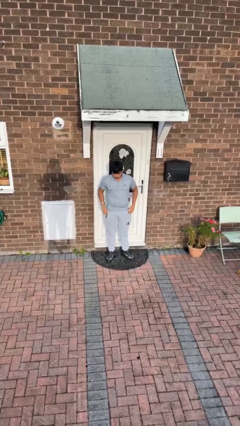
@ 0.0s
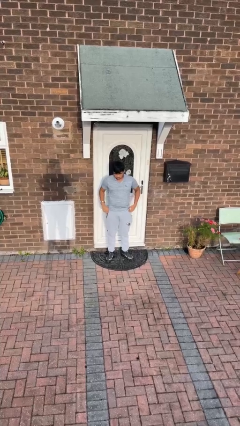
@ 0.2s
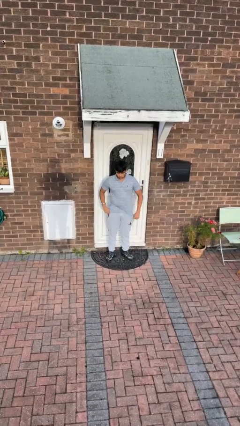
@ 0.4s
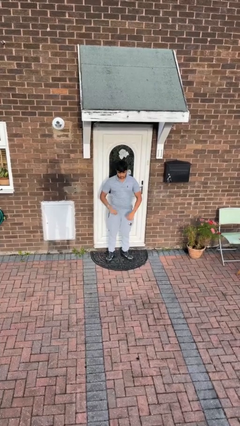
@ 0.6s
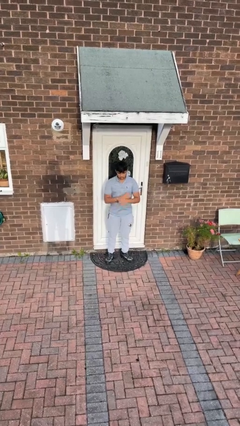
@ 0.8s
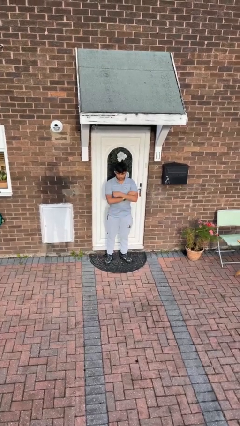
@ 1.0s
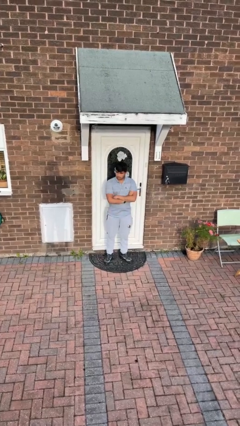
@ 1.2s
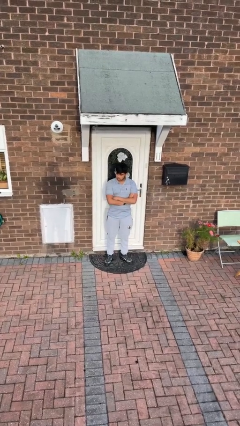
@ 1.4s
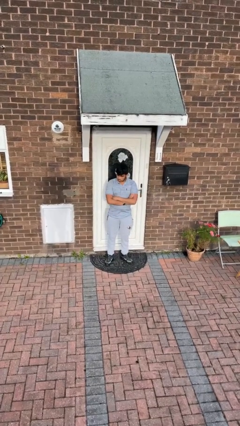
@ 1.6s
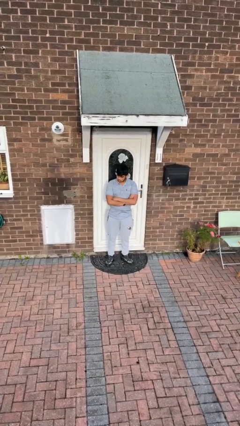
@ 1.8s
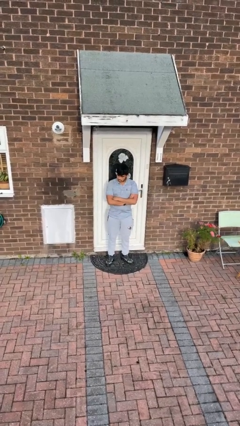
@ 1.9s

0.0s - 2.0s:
person crosses arms

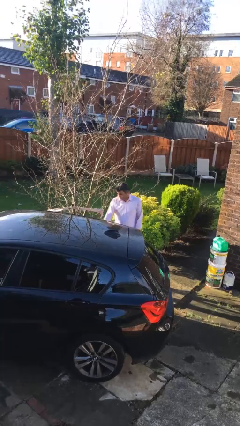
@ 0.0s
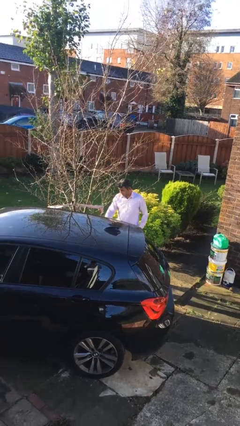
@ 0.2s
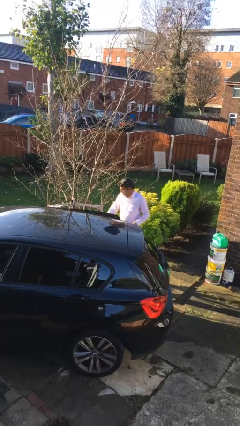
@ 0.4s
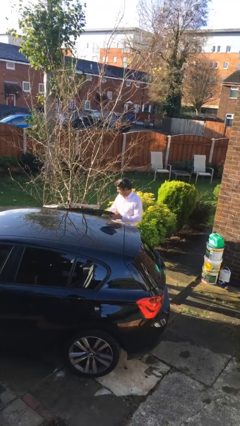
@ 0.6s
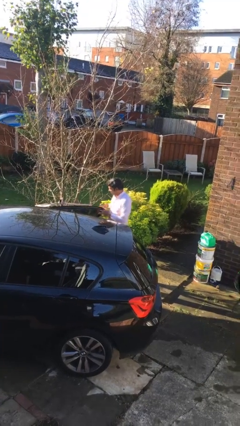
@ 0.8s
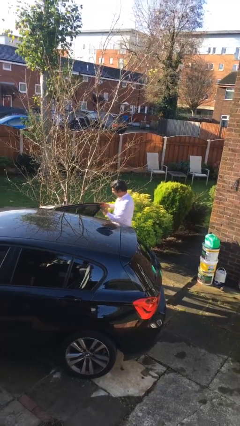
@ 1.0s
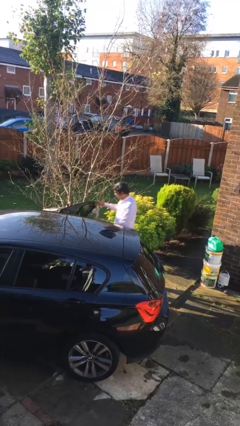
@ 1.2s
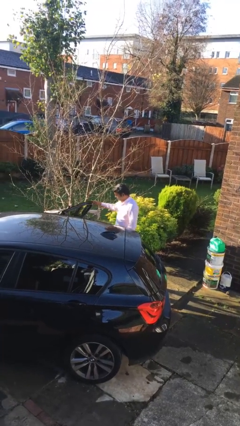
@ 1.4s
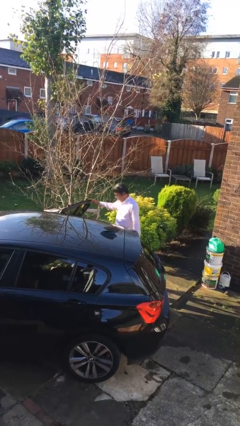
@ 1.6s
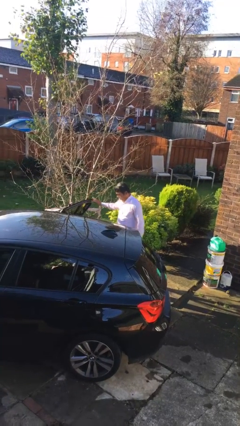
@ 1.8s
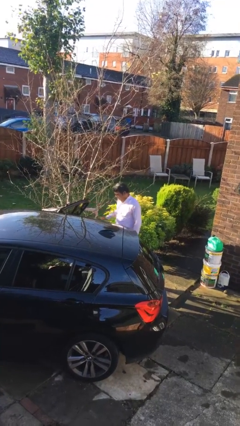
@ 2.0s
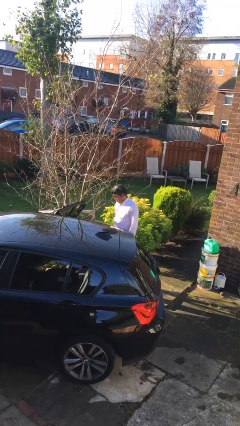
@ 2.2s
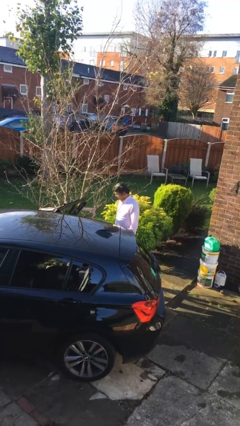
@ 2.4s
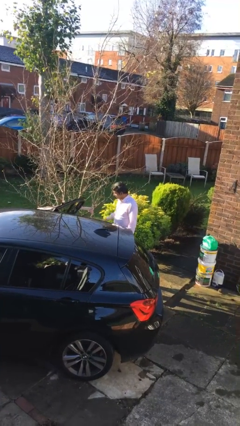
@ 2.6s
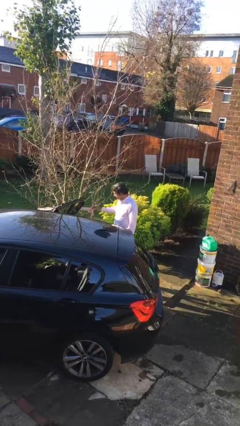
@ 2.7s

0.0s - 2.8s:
person opens car door

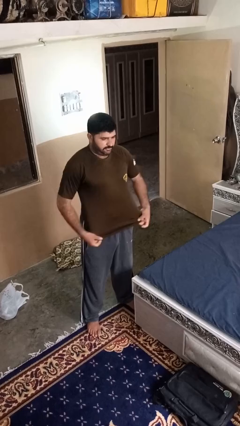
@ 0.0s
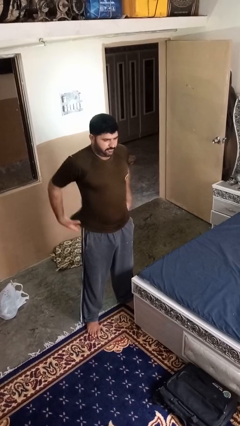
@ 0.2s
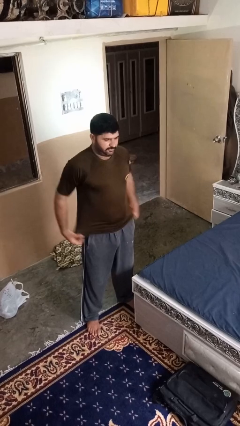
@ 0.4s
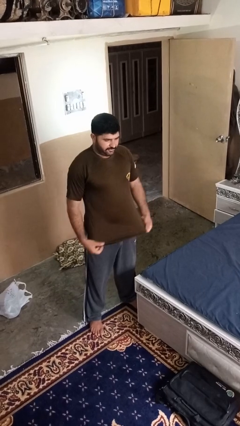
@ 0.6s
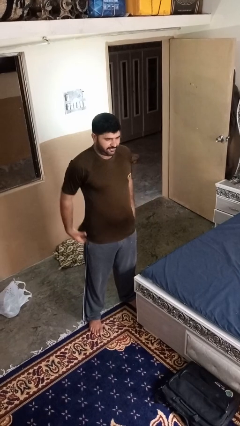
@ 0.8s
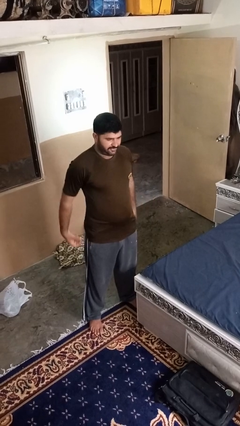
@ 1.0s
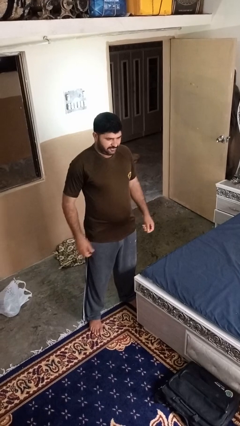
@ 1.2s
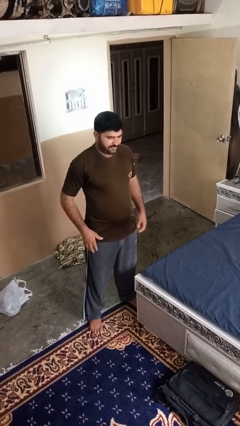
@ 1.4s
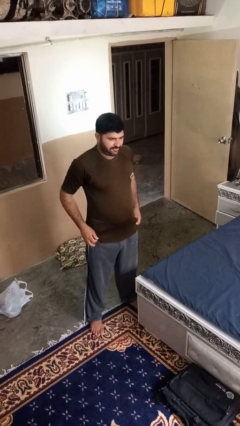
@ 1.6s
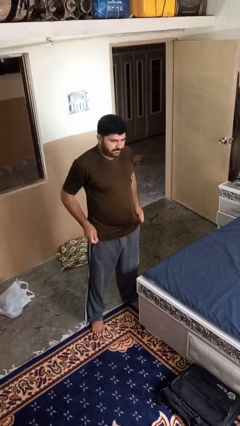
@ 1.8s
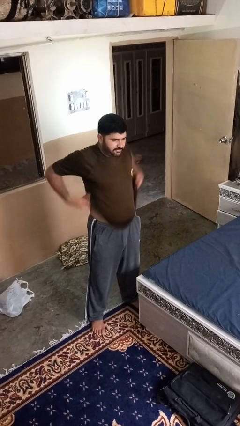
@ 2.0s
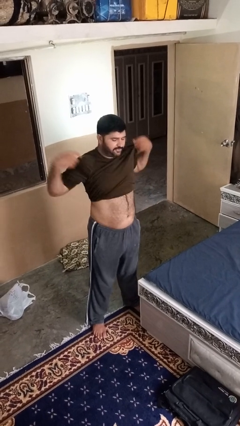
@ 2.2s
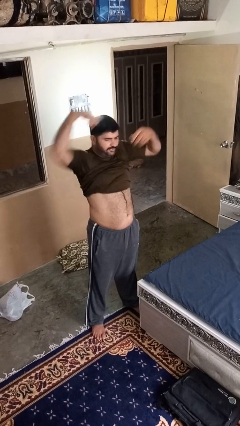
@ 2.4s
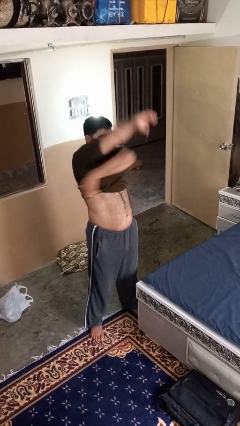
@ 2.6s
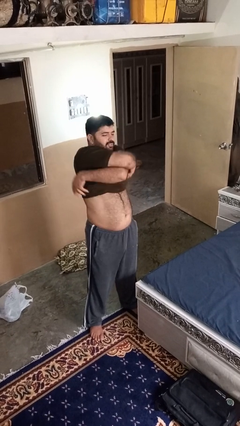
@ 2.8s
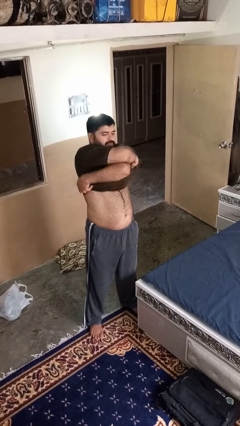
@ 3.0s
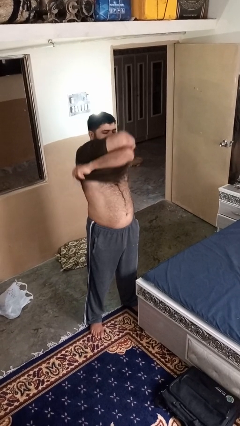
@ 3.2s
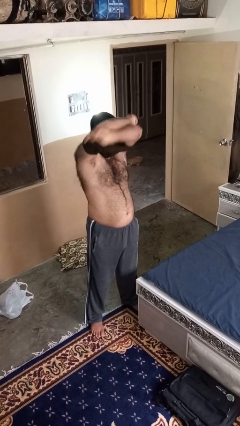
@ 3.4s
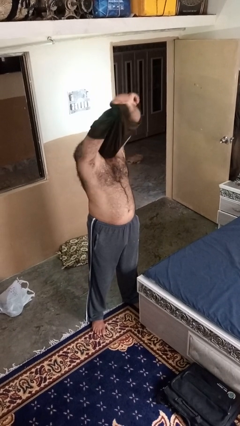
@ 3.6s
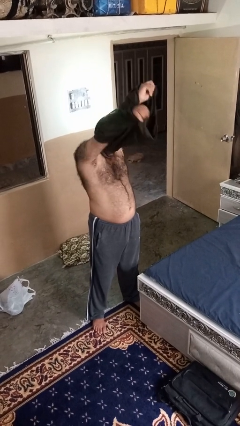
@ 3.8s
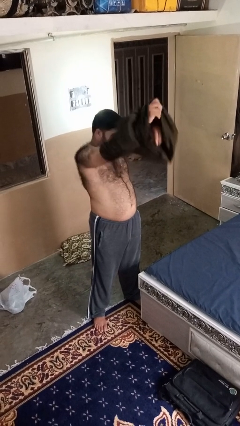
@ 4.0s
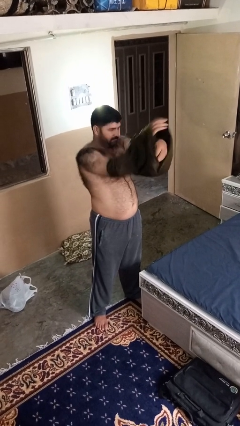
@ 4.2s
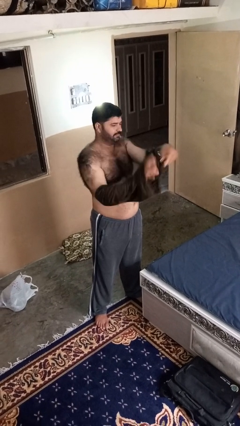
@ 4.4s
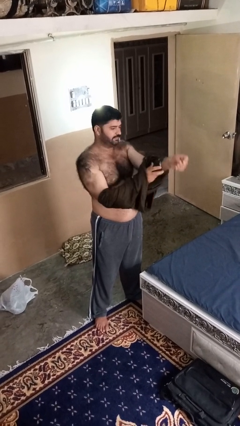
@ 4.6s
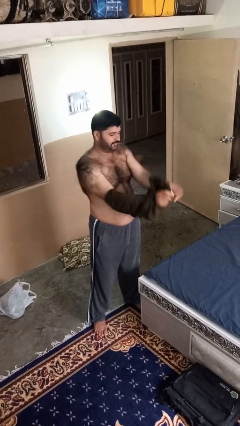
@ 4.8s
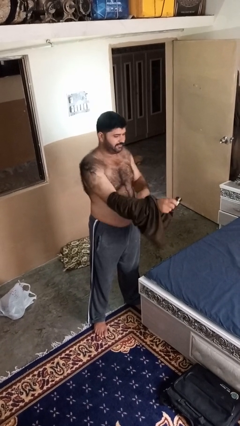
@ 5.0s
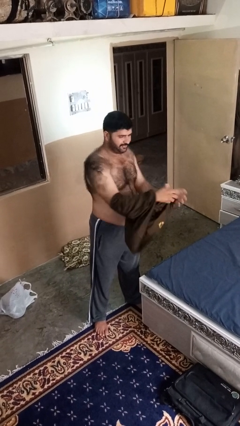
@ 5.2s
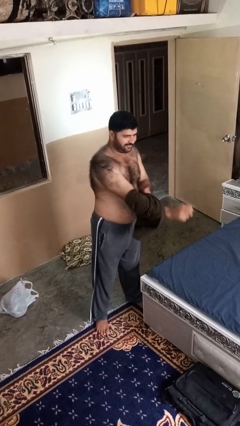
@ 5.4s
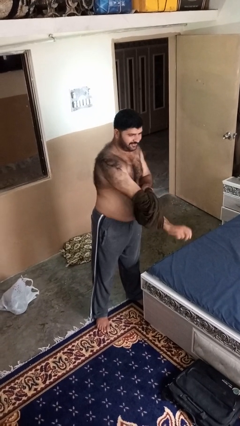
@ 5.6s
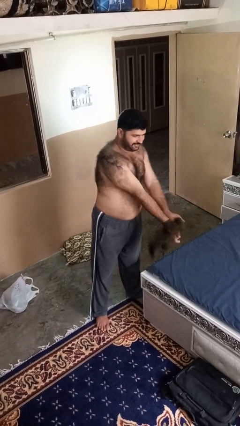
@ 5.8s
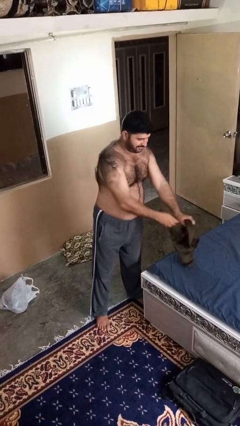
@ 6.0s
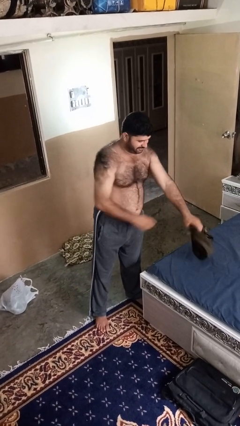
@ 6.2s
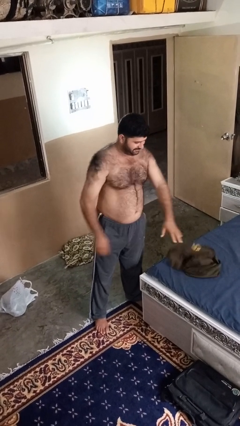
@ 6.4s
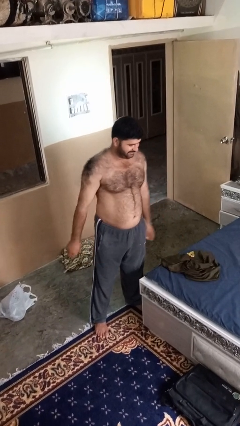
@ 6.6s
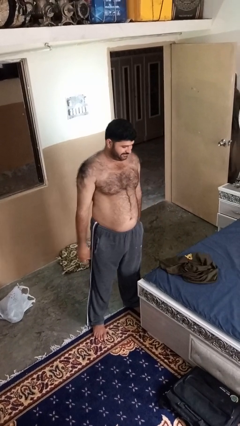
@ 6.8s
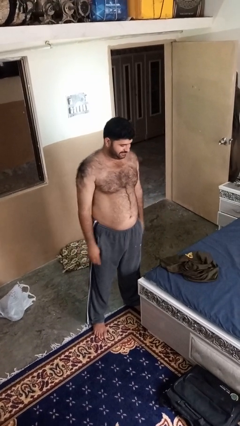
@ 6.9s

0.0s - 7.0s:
person takes off shirt

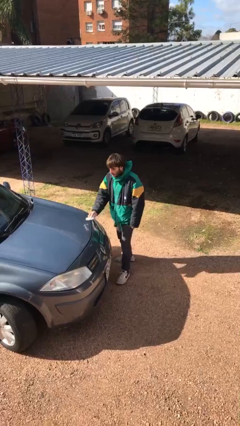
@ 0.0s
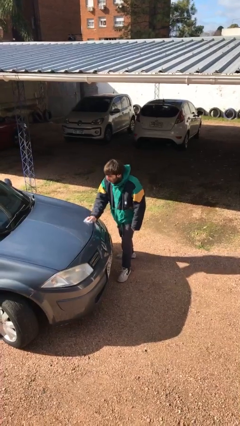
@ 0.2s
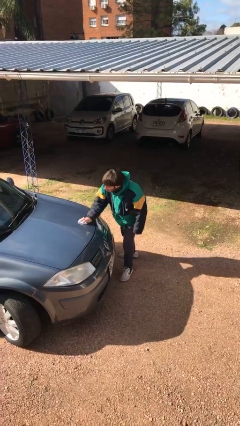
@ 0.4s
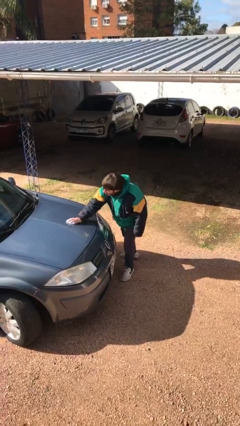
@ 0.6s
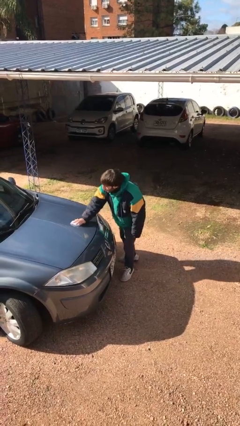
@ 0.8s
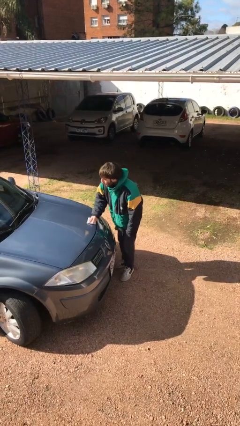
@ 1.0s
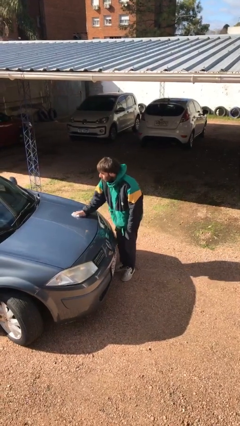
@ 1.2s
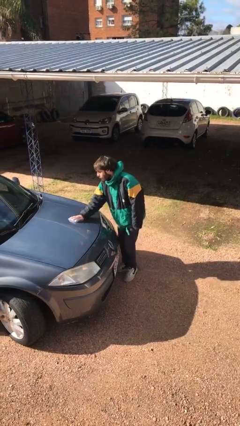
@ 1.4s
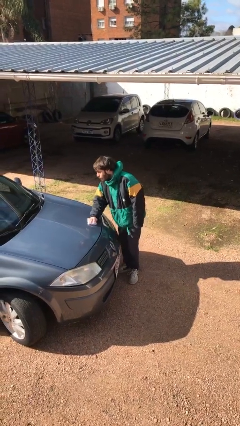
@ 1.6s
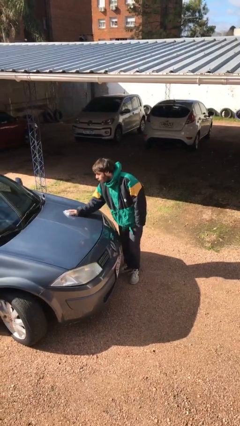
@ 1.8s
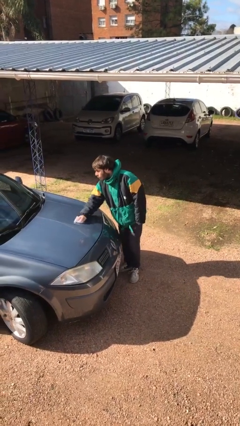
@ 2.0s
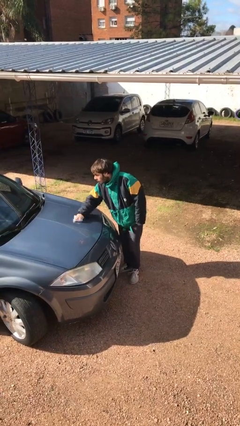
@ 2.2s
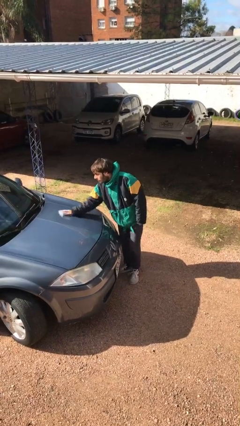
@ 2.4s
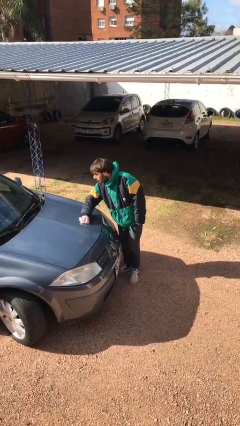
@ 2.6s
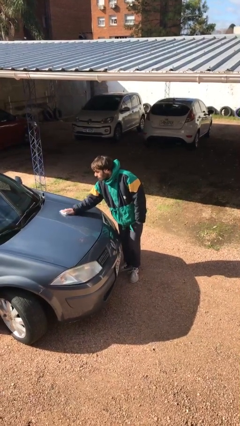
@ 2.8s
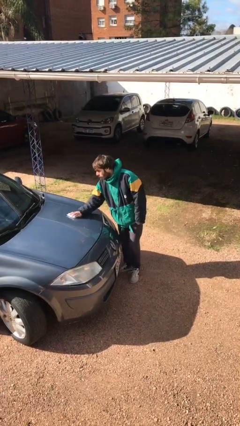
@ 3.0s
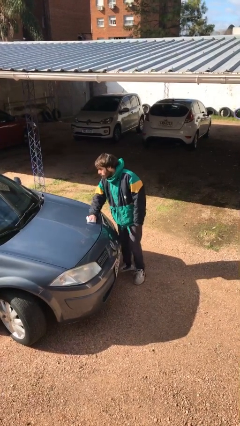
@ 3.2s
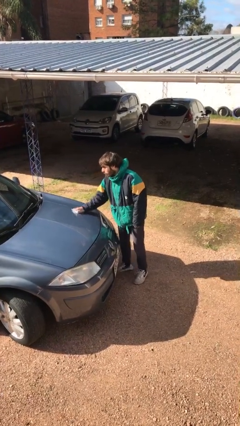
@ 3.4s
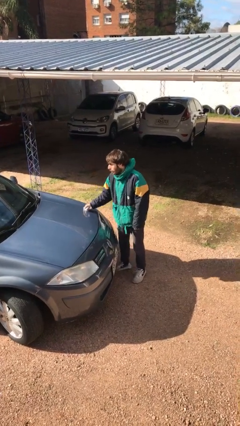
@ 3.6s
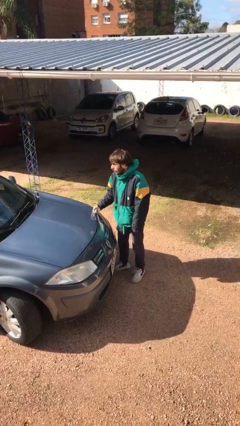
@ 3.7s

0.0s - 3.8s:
person polishes car with rag

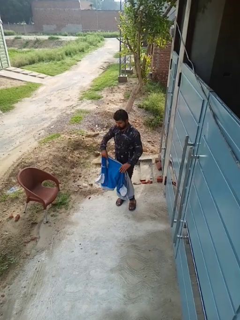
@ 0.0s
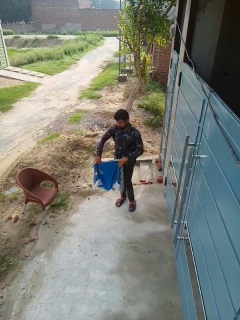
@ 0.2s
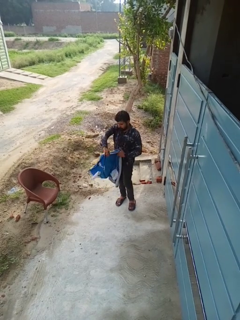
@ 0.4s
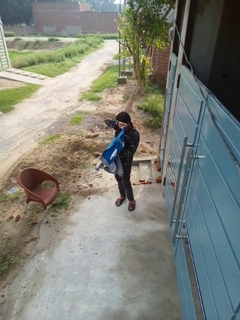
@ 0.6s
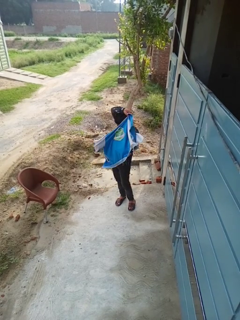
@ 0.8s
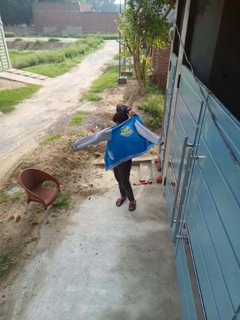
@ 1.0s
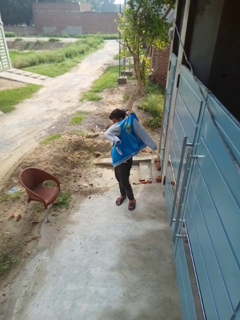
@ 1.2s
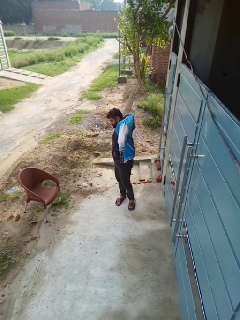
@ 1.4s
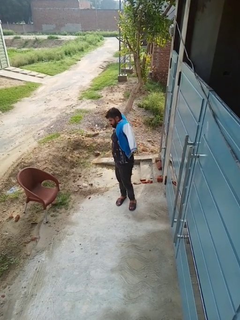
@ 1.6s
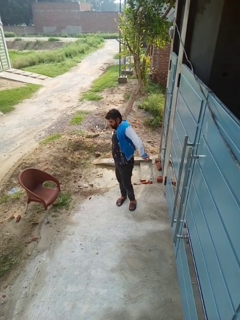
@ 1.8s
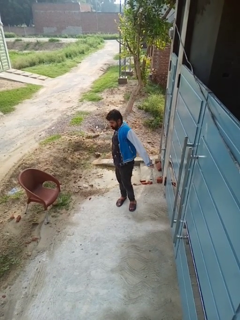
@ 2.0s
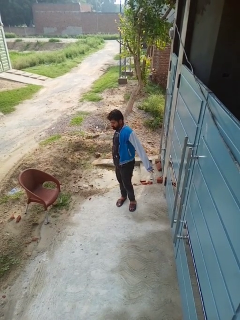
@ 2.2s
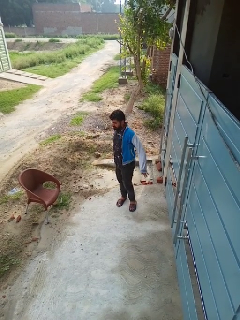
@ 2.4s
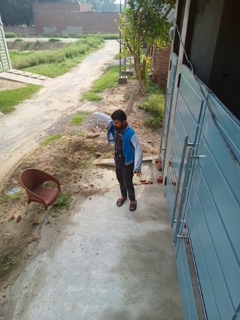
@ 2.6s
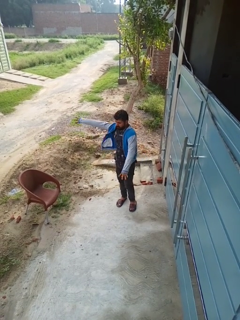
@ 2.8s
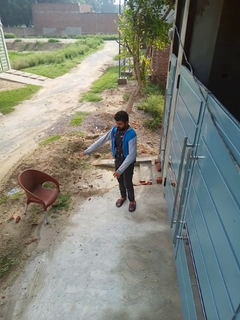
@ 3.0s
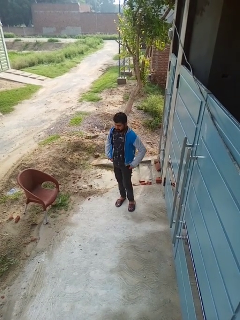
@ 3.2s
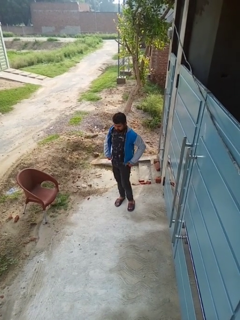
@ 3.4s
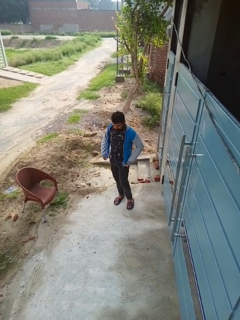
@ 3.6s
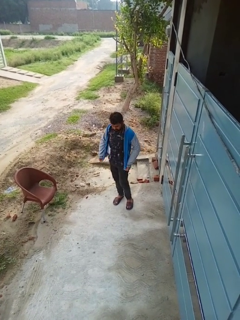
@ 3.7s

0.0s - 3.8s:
person puts on jacket
